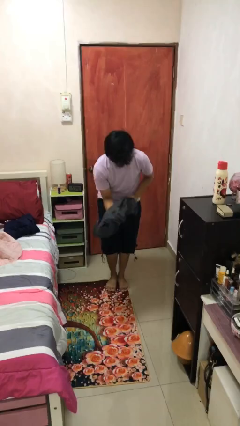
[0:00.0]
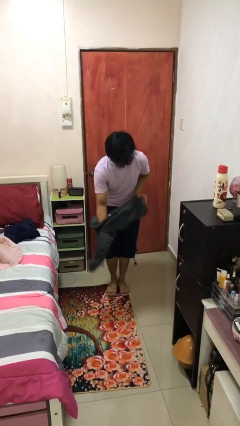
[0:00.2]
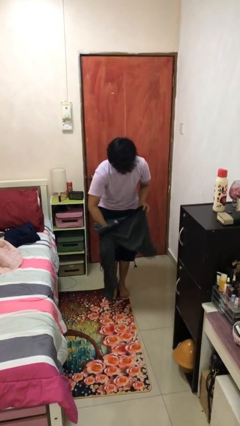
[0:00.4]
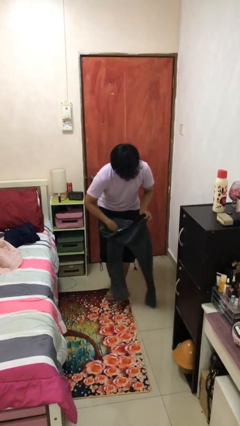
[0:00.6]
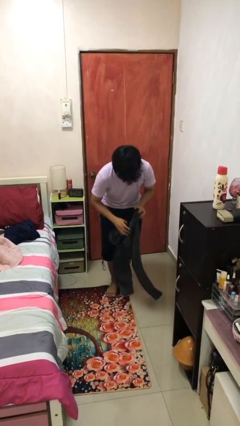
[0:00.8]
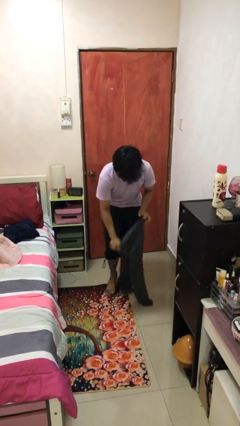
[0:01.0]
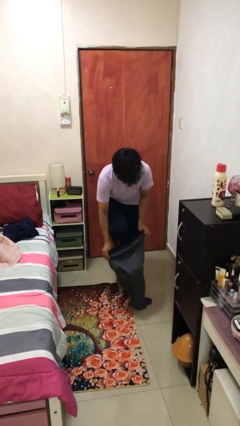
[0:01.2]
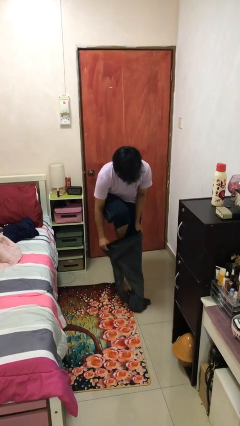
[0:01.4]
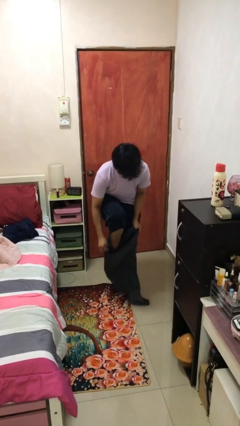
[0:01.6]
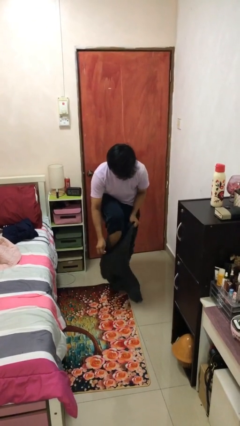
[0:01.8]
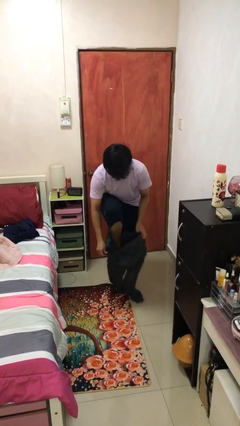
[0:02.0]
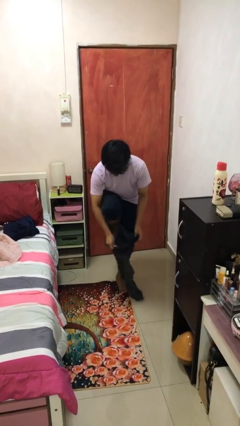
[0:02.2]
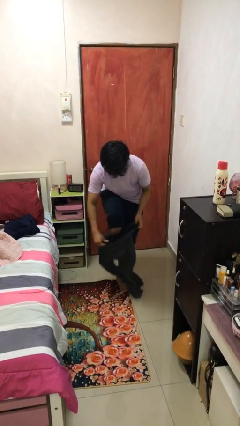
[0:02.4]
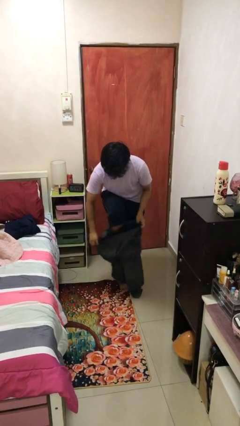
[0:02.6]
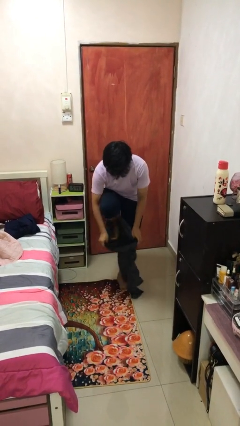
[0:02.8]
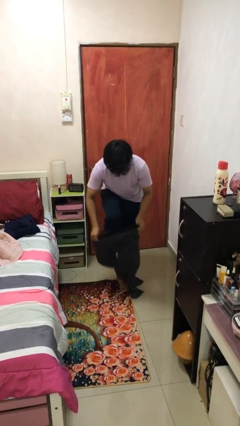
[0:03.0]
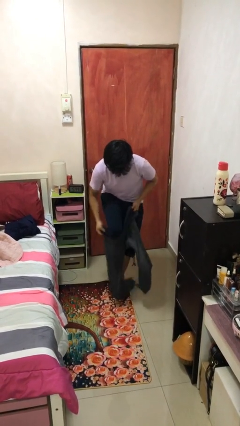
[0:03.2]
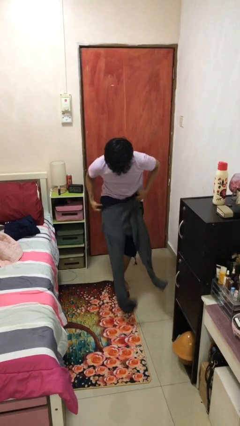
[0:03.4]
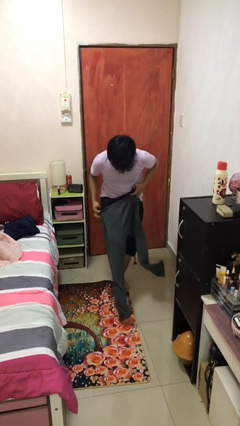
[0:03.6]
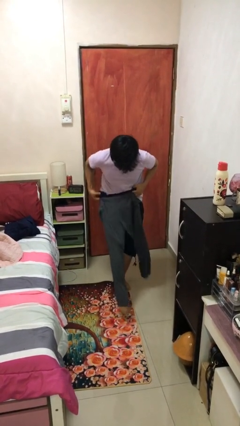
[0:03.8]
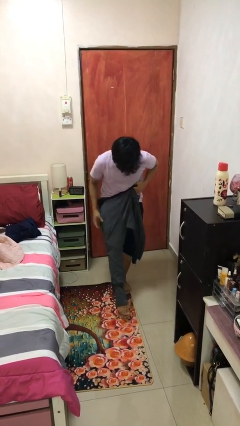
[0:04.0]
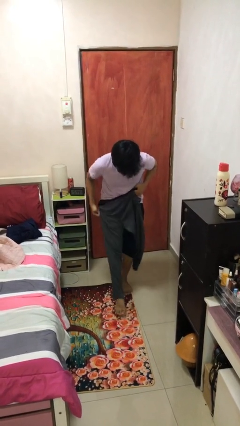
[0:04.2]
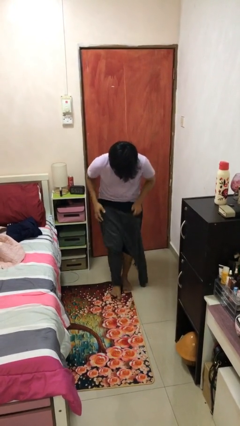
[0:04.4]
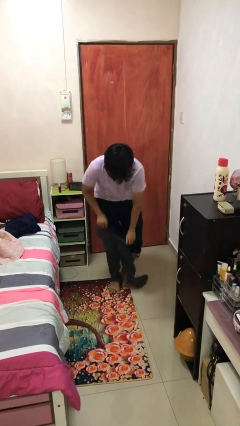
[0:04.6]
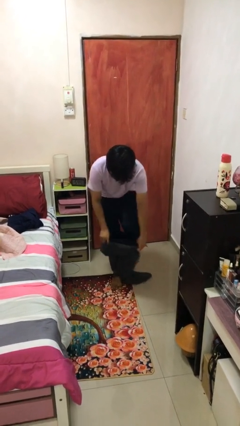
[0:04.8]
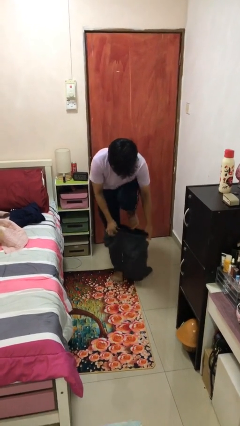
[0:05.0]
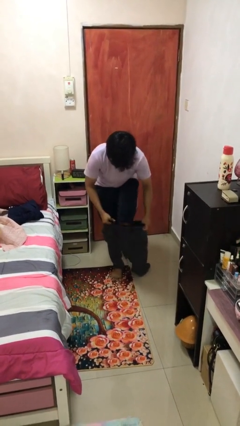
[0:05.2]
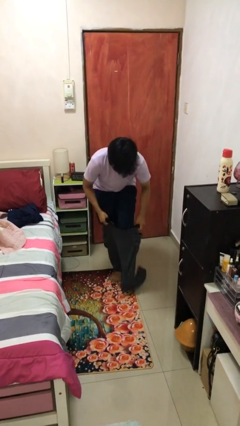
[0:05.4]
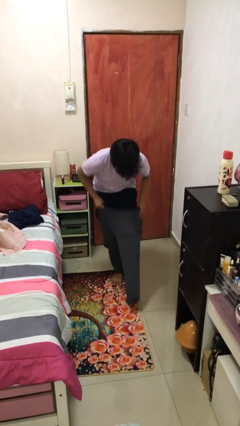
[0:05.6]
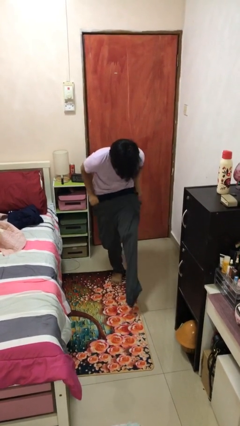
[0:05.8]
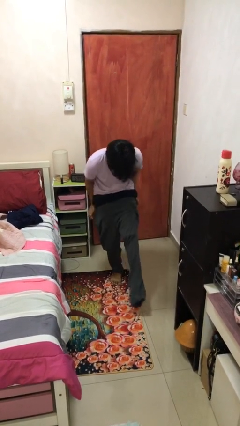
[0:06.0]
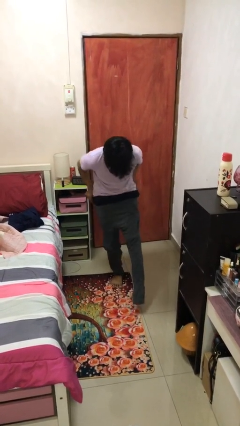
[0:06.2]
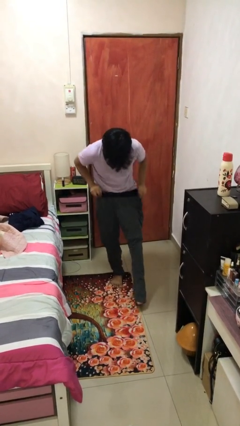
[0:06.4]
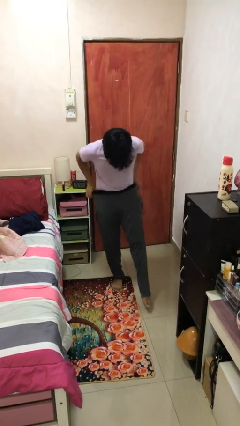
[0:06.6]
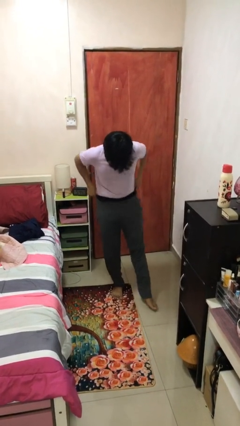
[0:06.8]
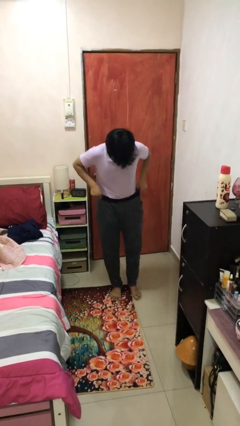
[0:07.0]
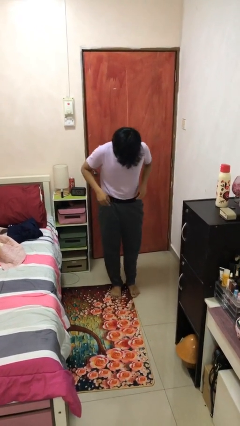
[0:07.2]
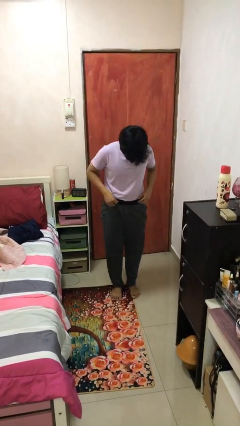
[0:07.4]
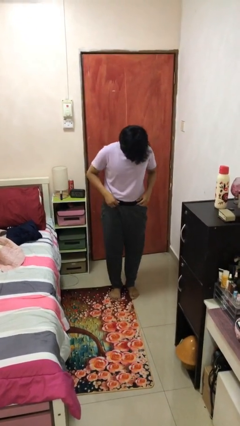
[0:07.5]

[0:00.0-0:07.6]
person puts on pants

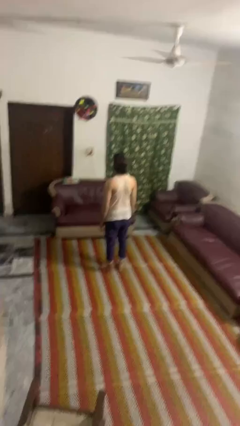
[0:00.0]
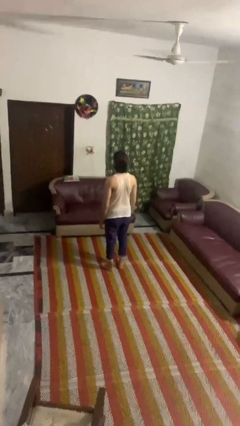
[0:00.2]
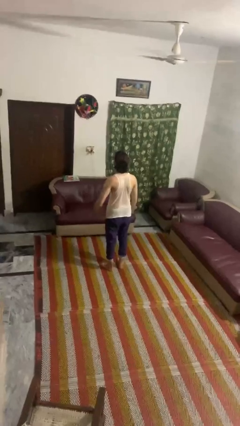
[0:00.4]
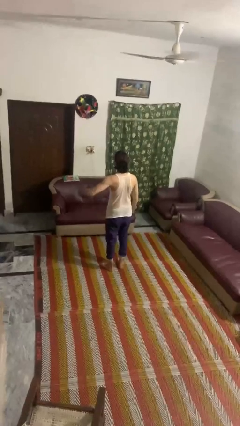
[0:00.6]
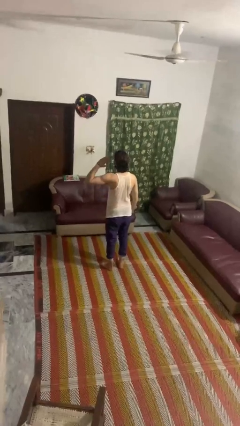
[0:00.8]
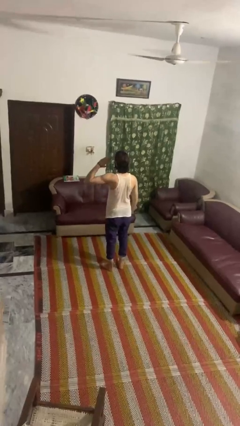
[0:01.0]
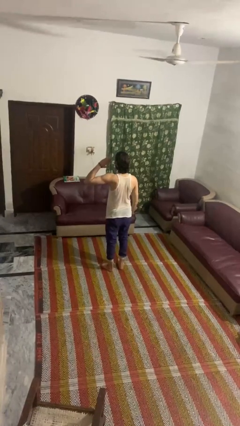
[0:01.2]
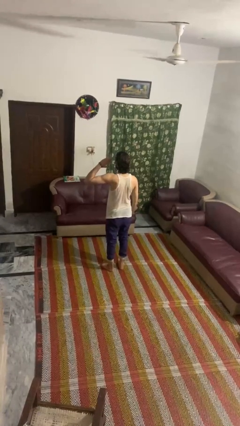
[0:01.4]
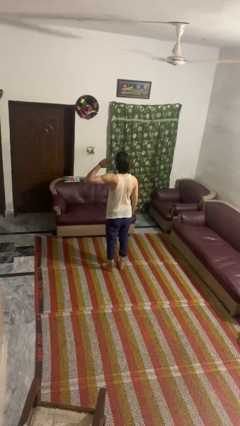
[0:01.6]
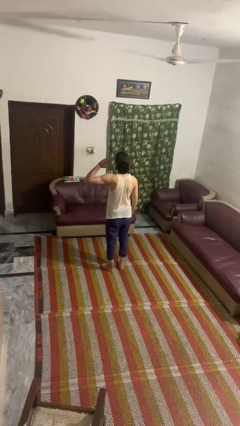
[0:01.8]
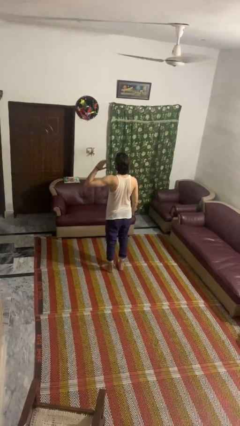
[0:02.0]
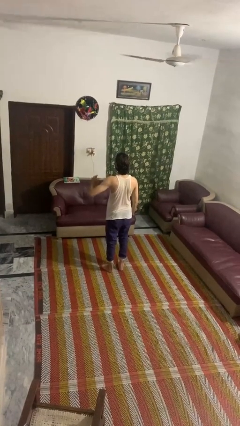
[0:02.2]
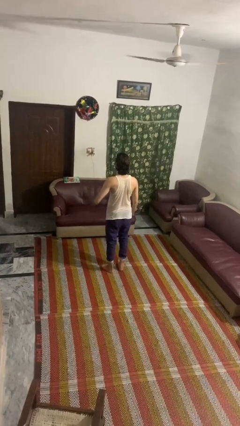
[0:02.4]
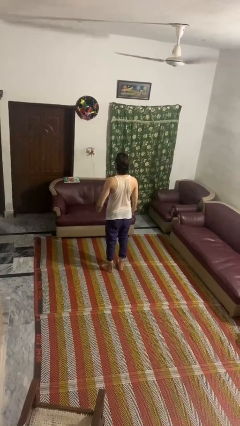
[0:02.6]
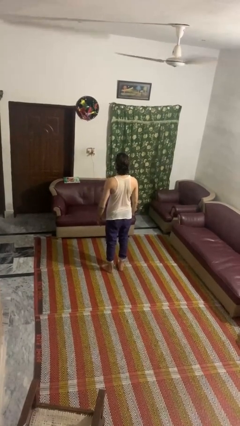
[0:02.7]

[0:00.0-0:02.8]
person salutes

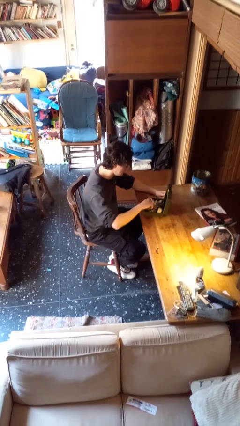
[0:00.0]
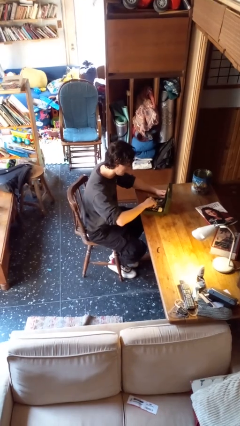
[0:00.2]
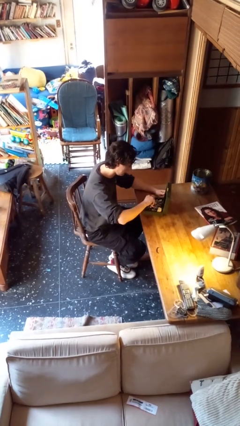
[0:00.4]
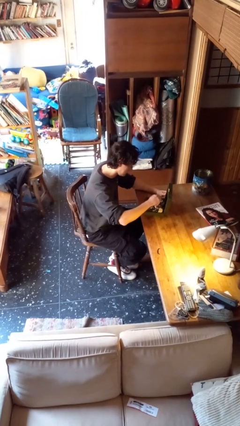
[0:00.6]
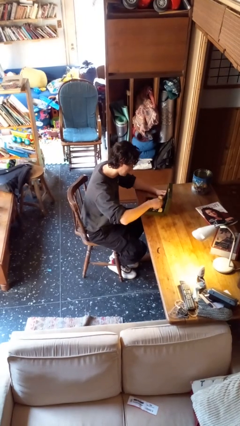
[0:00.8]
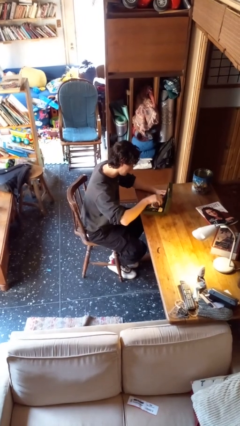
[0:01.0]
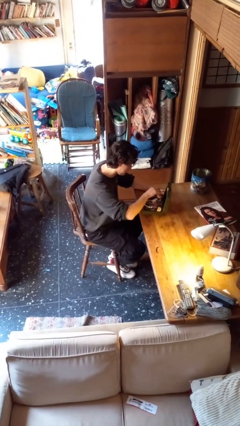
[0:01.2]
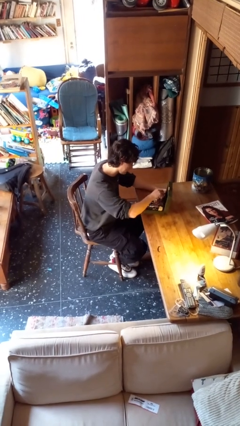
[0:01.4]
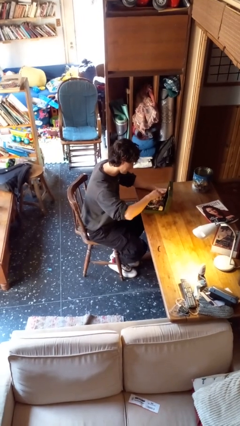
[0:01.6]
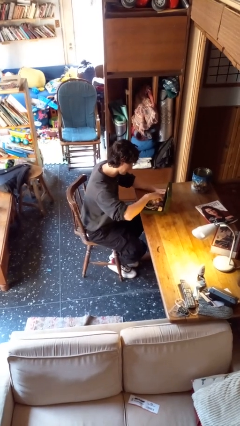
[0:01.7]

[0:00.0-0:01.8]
person searches jewelry box

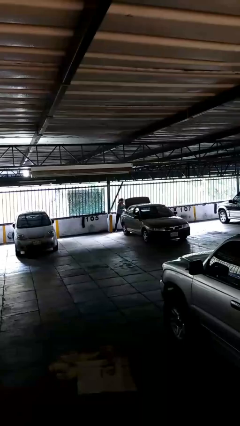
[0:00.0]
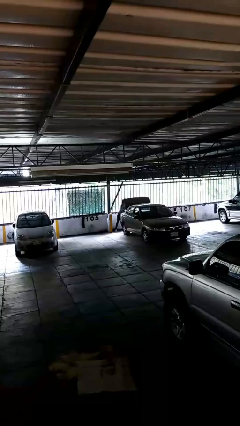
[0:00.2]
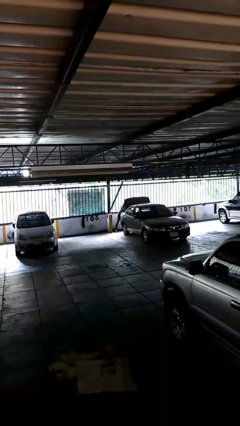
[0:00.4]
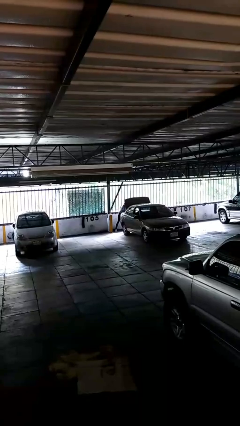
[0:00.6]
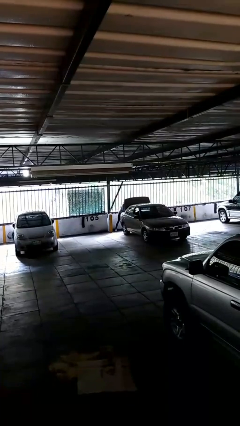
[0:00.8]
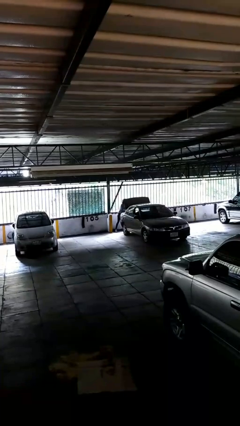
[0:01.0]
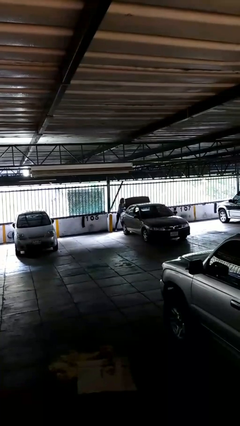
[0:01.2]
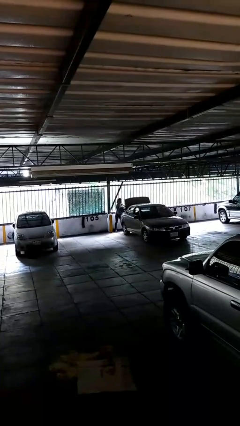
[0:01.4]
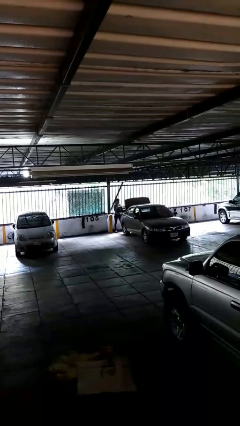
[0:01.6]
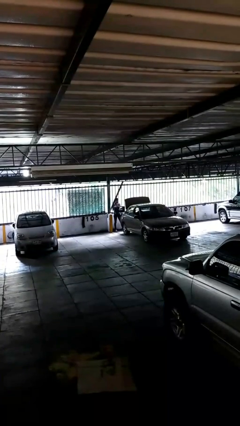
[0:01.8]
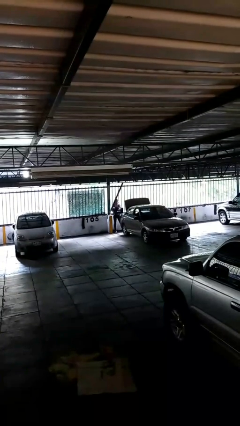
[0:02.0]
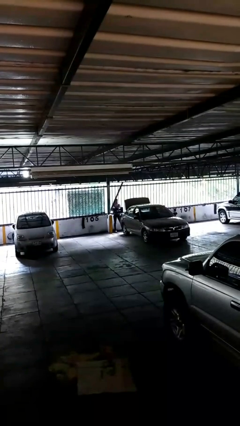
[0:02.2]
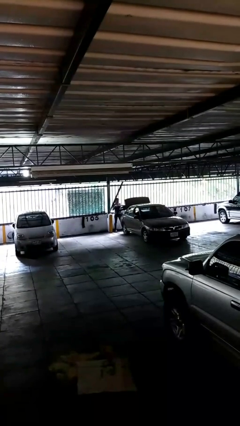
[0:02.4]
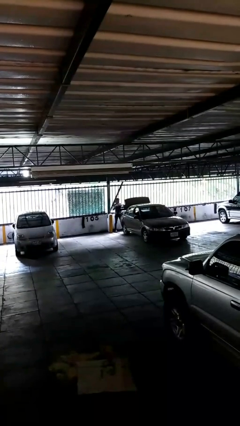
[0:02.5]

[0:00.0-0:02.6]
person unloads car

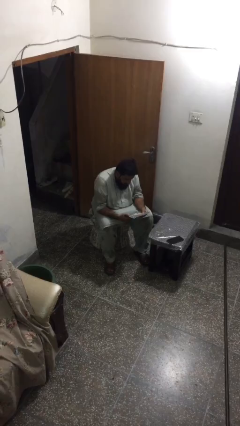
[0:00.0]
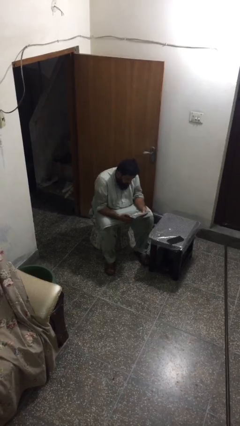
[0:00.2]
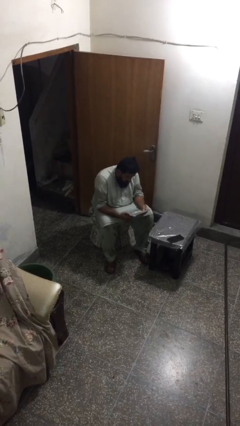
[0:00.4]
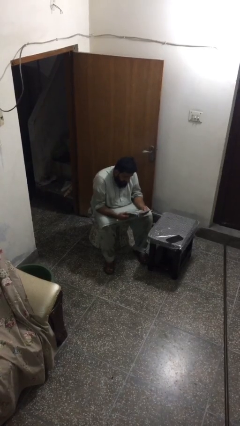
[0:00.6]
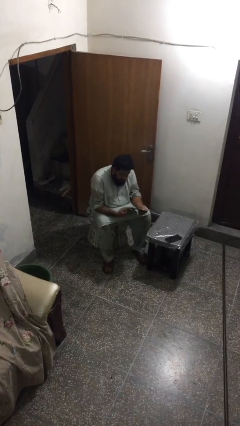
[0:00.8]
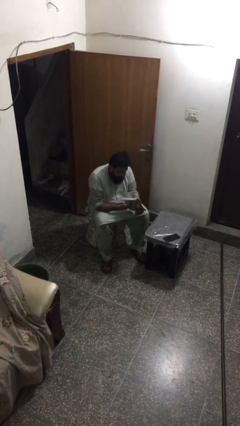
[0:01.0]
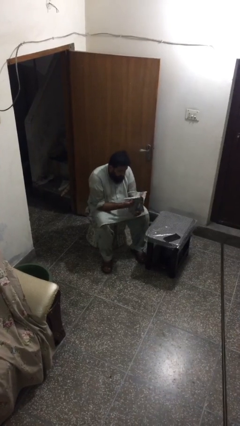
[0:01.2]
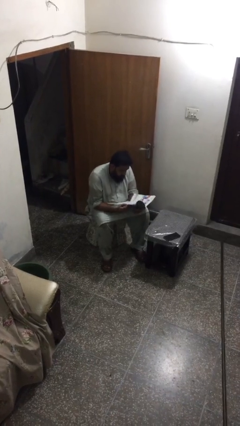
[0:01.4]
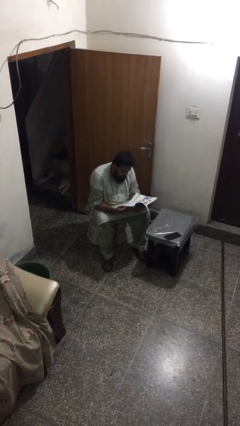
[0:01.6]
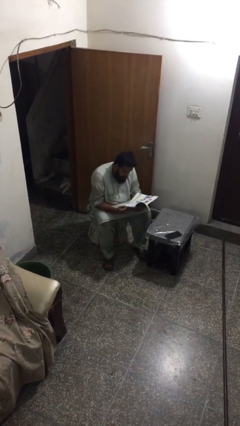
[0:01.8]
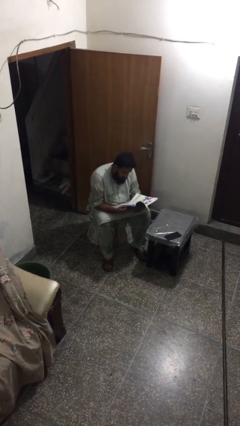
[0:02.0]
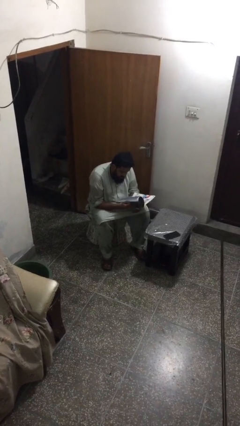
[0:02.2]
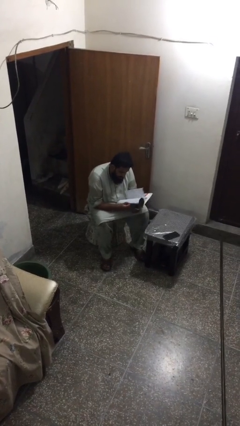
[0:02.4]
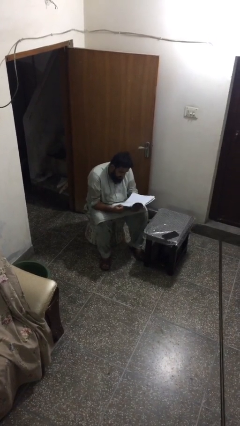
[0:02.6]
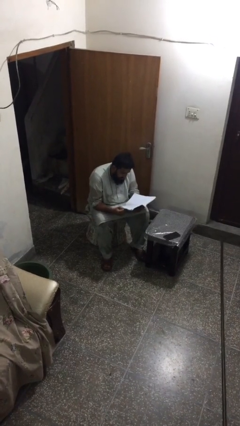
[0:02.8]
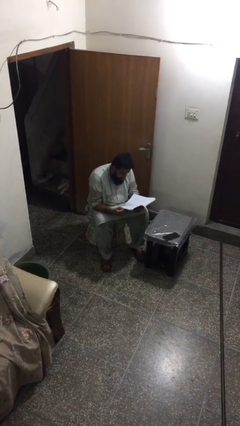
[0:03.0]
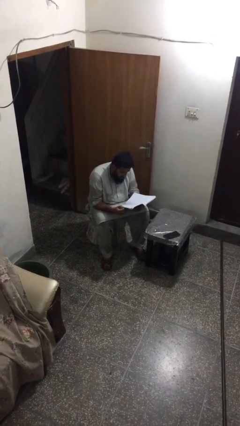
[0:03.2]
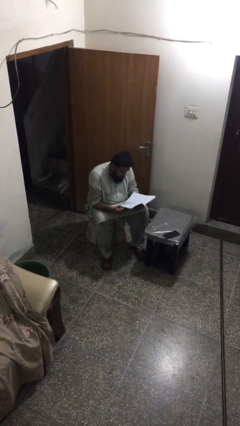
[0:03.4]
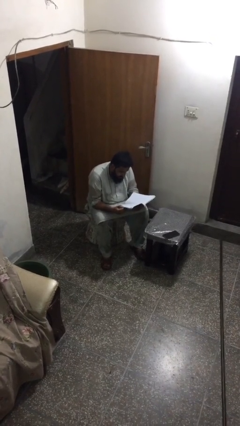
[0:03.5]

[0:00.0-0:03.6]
person reads document
